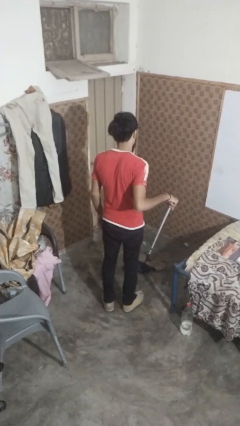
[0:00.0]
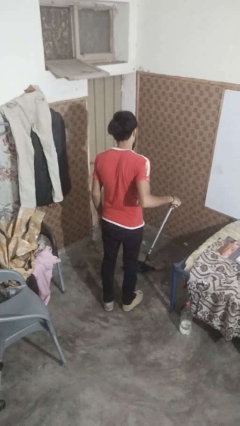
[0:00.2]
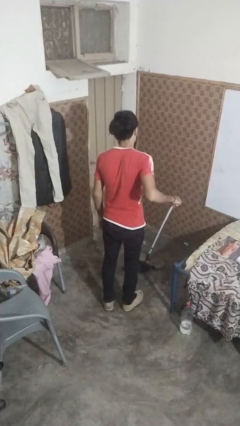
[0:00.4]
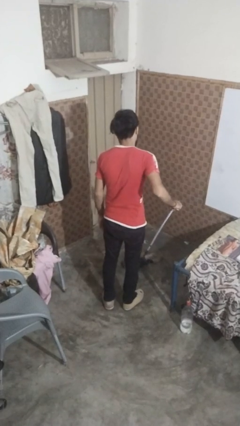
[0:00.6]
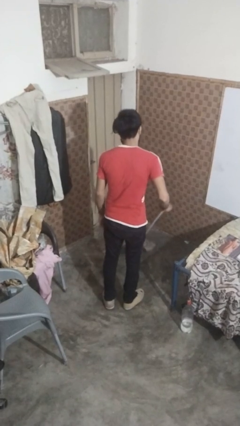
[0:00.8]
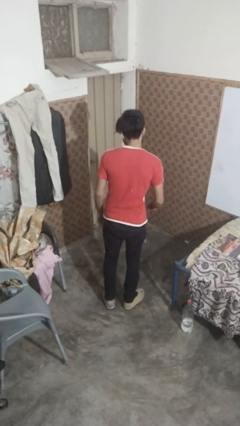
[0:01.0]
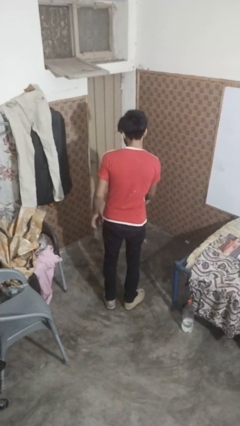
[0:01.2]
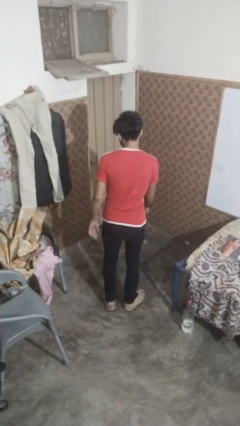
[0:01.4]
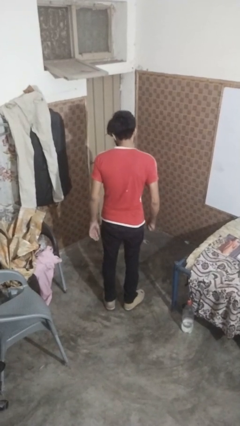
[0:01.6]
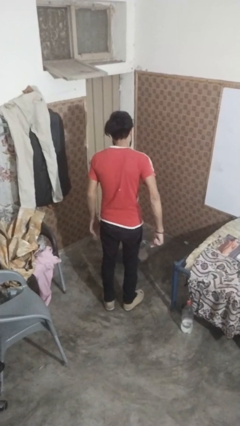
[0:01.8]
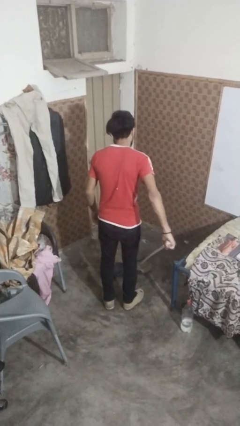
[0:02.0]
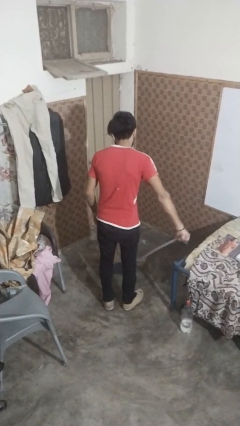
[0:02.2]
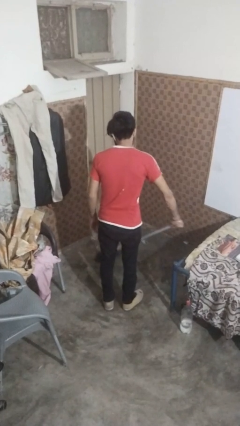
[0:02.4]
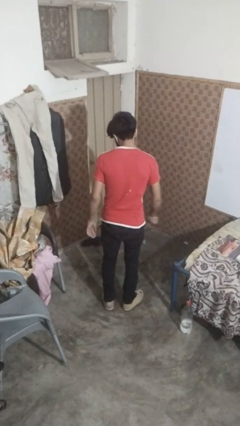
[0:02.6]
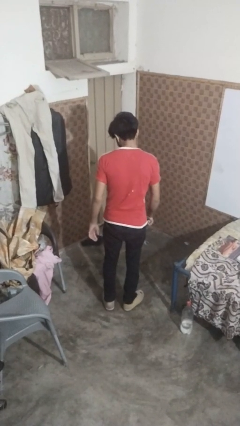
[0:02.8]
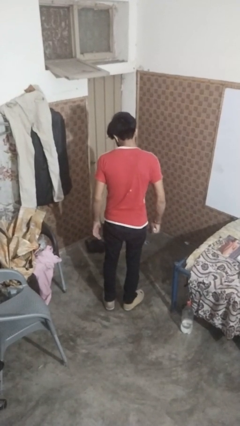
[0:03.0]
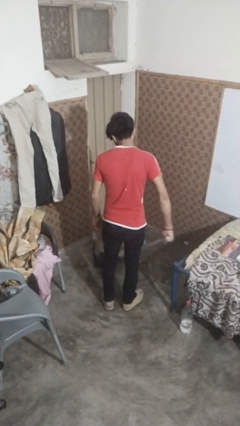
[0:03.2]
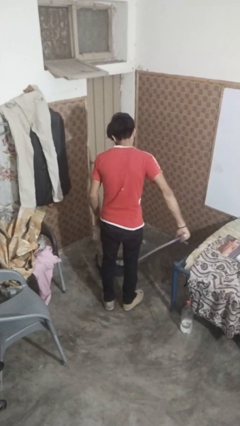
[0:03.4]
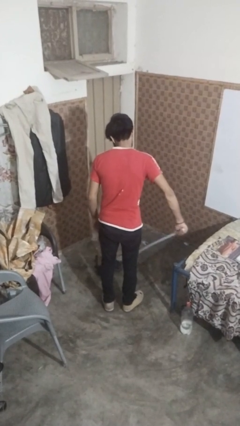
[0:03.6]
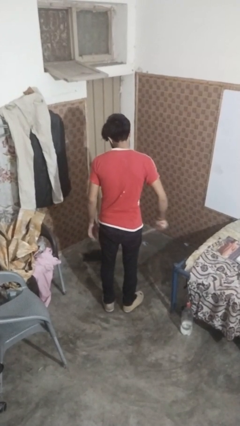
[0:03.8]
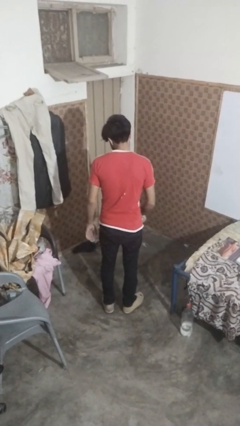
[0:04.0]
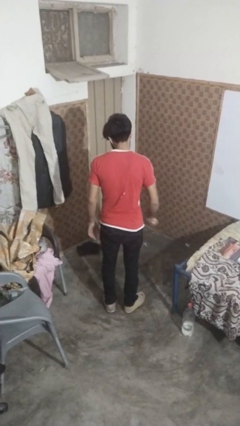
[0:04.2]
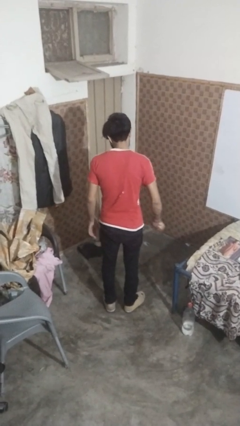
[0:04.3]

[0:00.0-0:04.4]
person mops

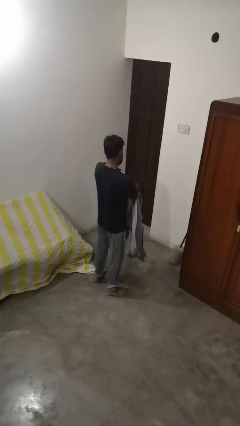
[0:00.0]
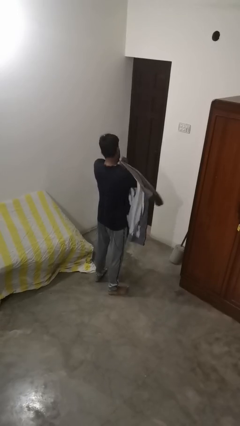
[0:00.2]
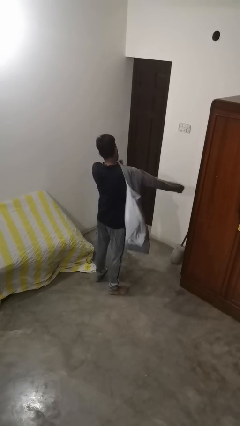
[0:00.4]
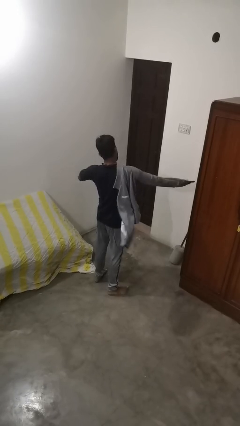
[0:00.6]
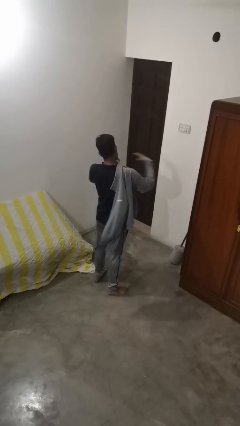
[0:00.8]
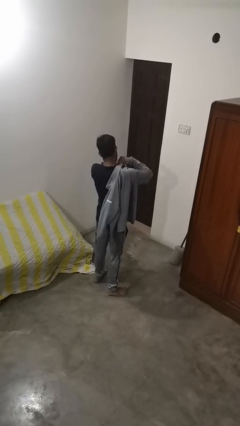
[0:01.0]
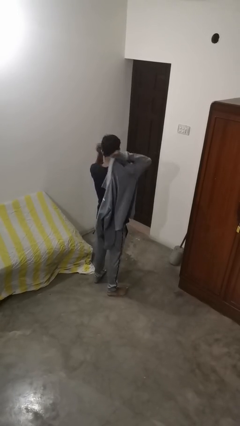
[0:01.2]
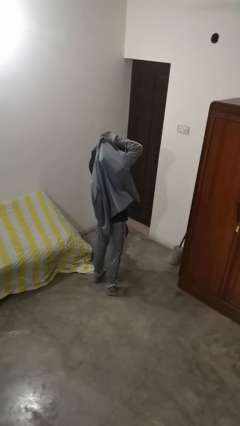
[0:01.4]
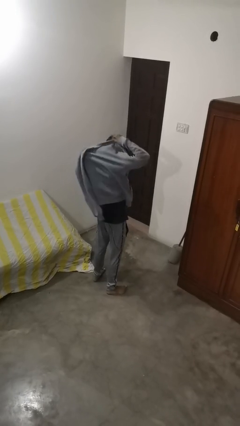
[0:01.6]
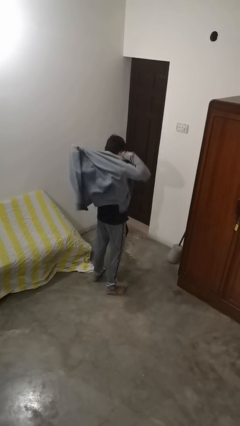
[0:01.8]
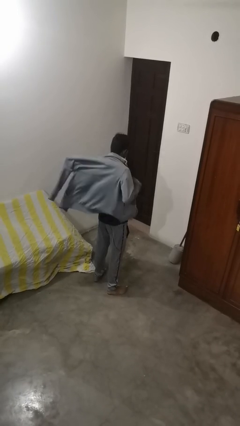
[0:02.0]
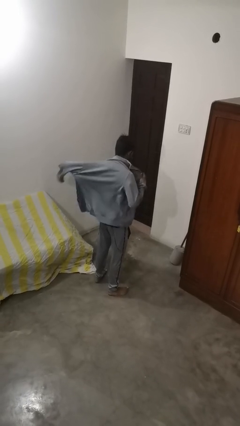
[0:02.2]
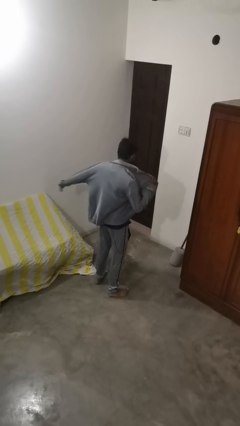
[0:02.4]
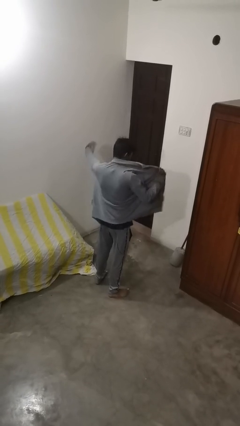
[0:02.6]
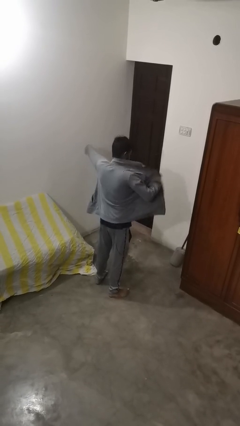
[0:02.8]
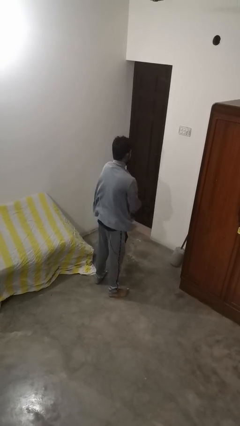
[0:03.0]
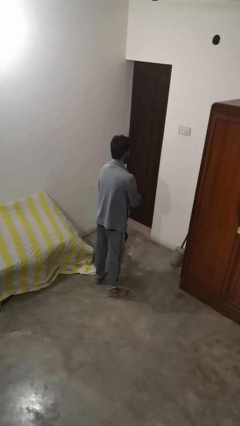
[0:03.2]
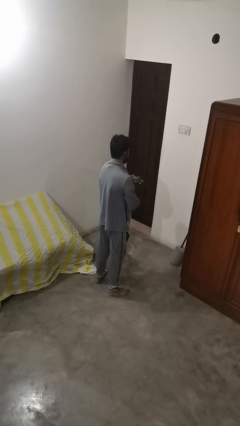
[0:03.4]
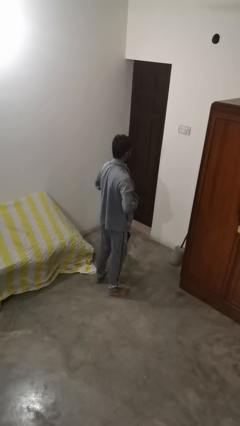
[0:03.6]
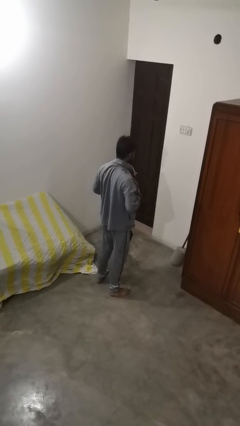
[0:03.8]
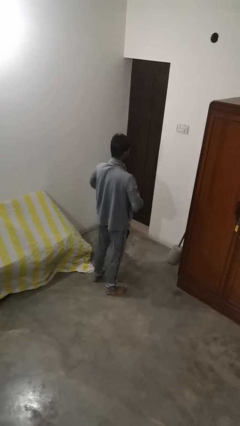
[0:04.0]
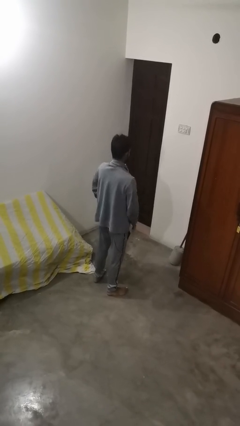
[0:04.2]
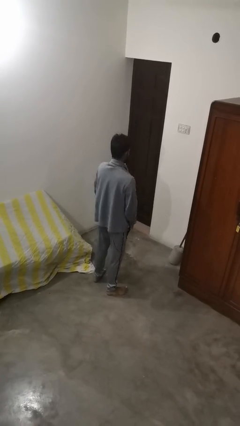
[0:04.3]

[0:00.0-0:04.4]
person puts on jacket

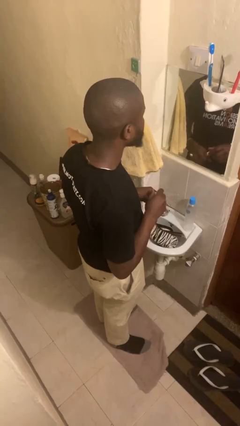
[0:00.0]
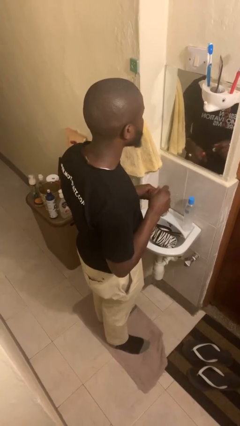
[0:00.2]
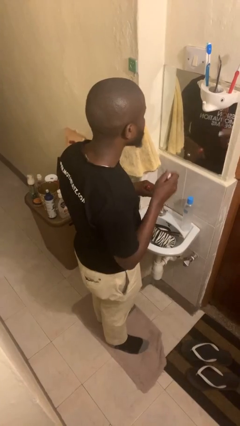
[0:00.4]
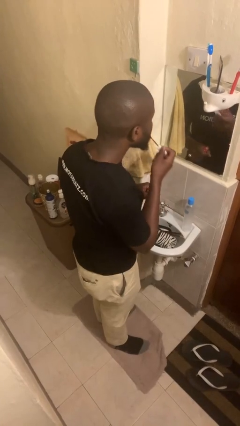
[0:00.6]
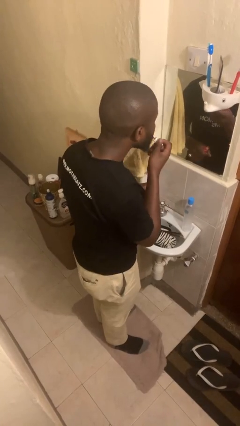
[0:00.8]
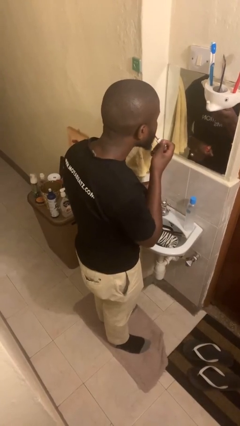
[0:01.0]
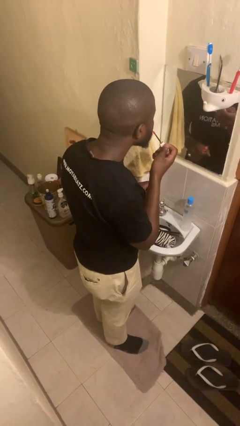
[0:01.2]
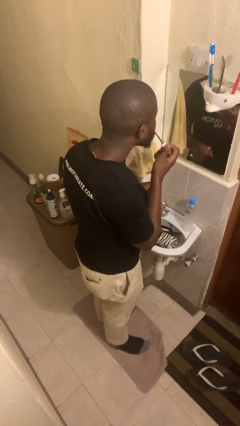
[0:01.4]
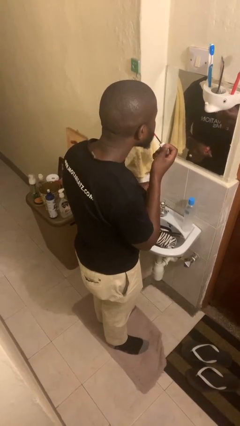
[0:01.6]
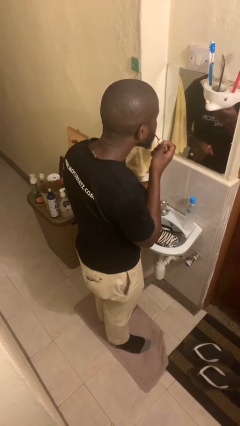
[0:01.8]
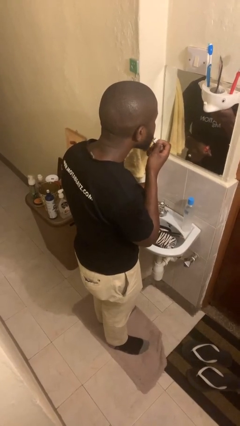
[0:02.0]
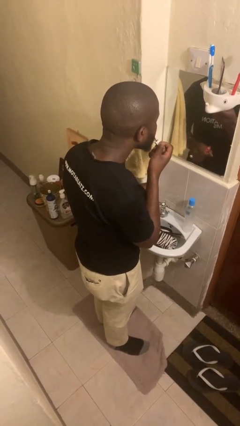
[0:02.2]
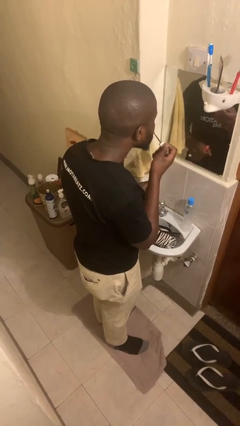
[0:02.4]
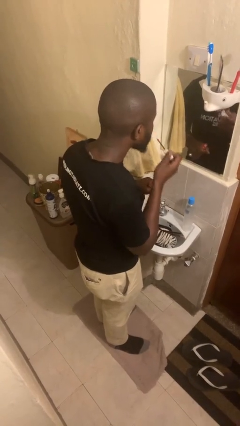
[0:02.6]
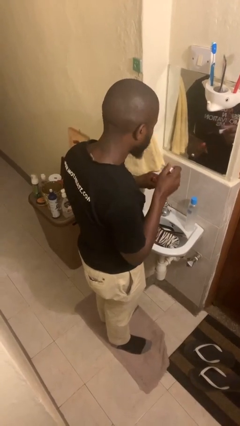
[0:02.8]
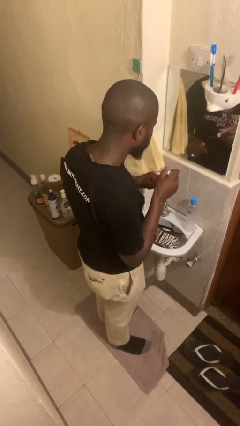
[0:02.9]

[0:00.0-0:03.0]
person applies lip makeup

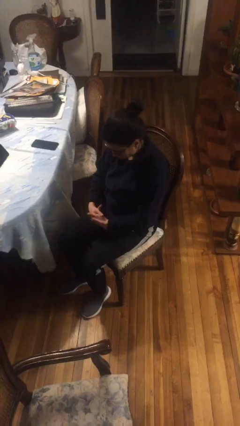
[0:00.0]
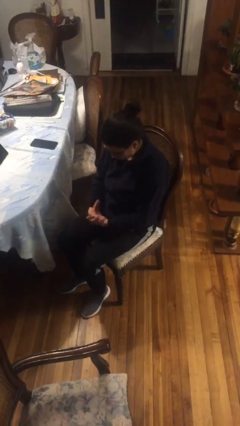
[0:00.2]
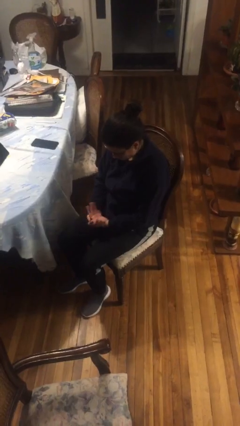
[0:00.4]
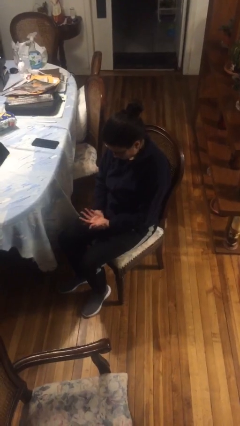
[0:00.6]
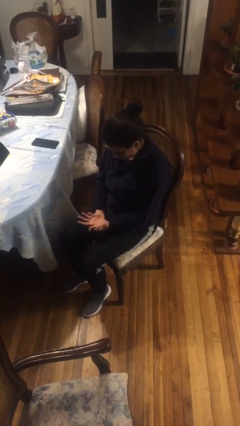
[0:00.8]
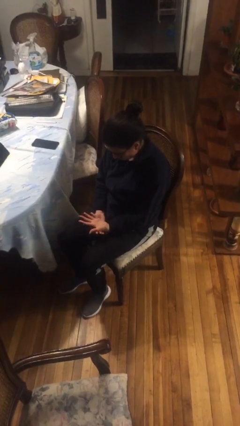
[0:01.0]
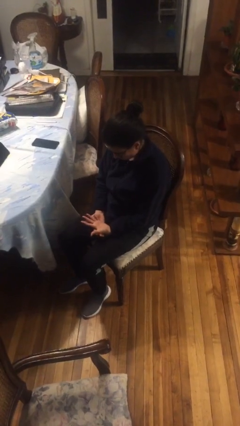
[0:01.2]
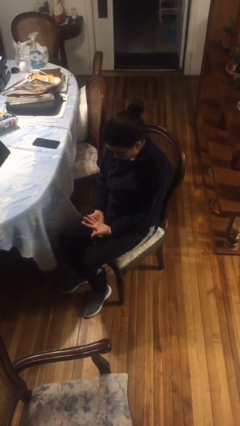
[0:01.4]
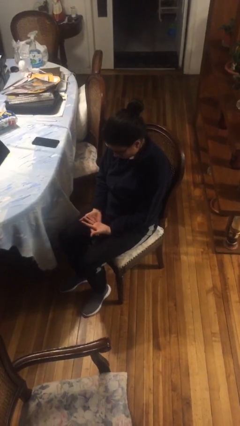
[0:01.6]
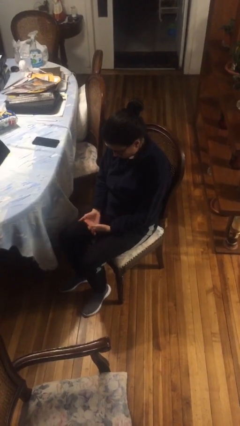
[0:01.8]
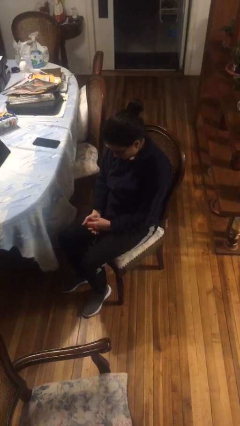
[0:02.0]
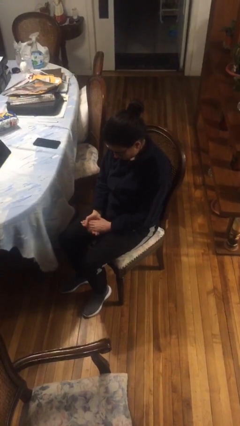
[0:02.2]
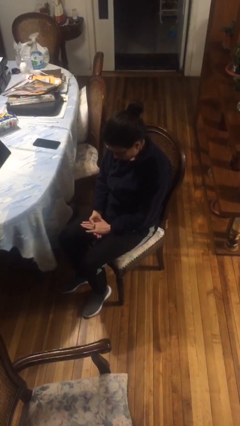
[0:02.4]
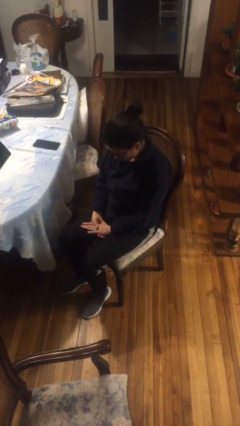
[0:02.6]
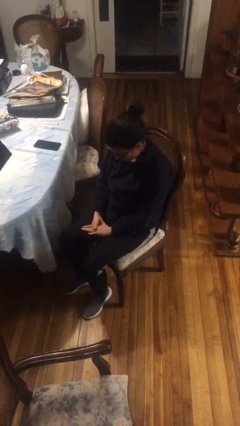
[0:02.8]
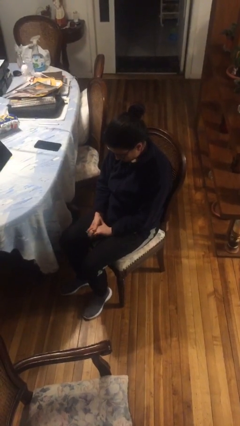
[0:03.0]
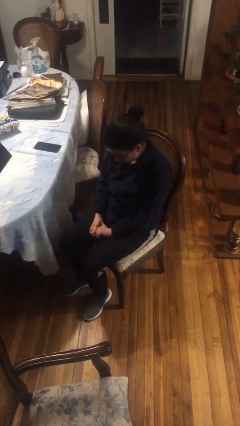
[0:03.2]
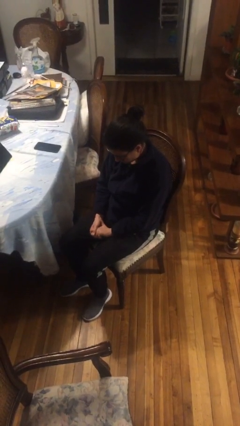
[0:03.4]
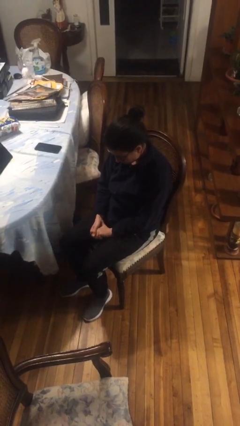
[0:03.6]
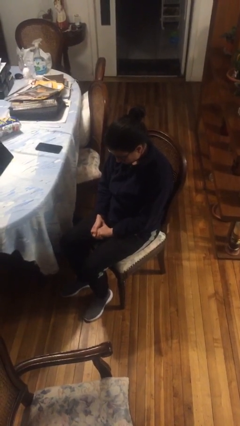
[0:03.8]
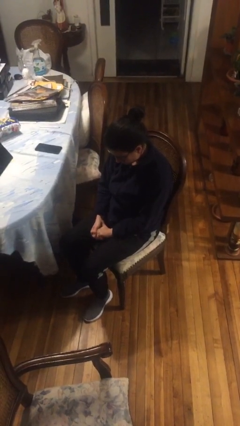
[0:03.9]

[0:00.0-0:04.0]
person looks at hands in lap

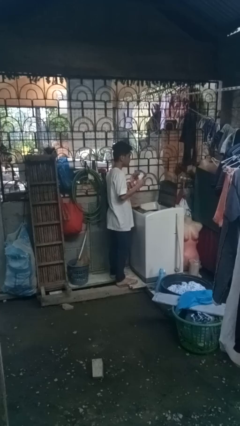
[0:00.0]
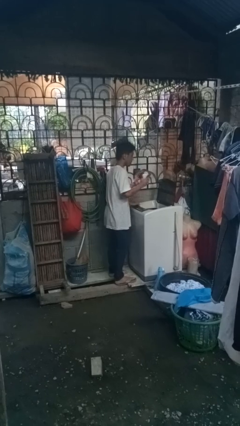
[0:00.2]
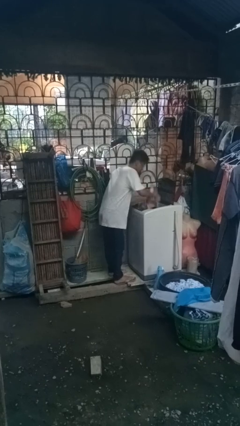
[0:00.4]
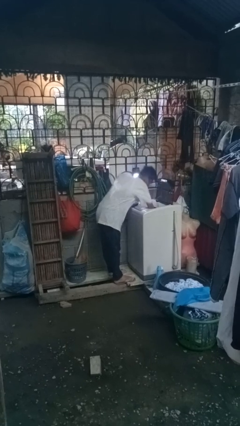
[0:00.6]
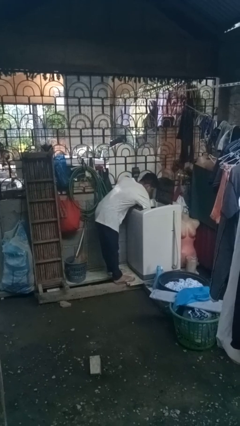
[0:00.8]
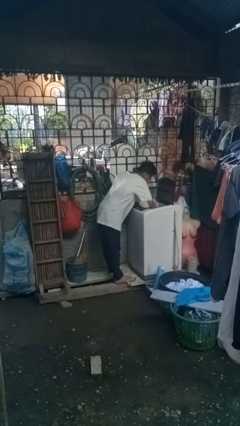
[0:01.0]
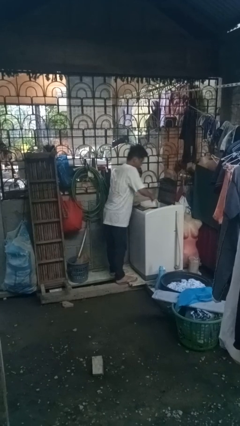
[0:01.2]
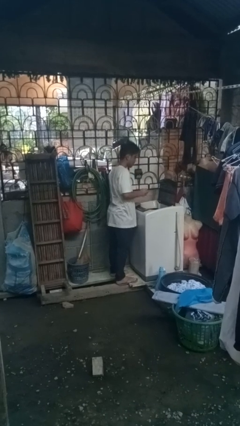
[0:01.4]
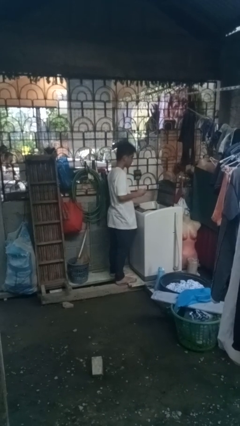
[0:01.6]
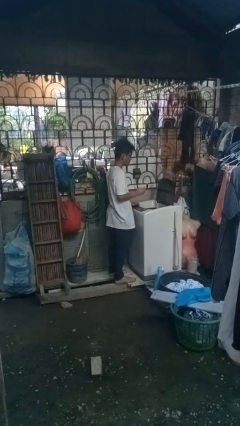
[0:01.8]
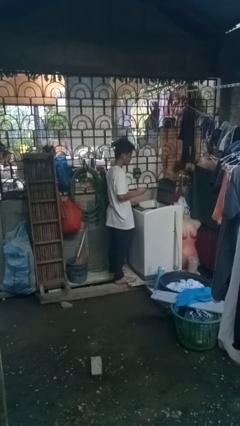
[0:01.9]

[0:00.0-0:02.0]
person loads dryer
